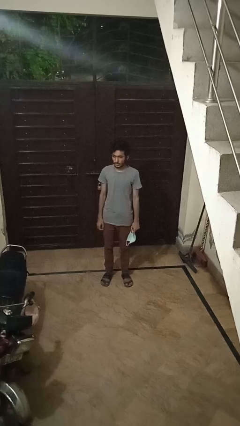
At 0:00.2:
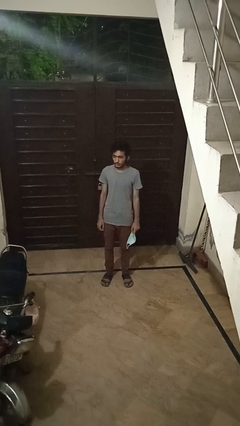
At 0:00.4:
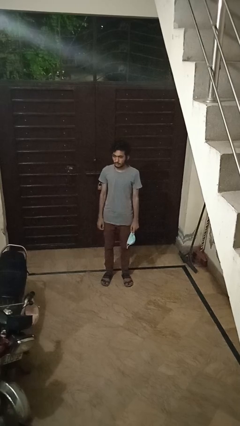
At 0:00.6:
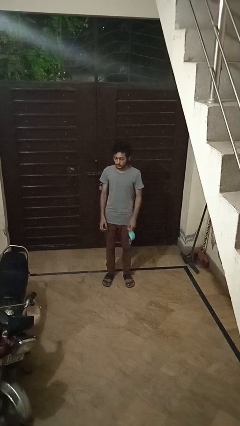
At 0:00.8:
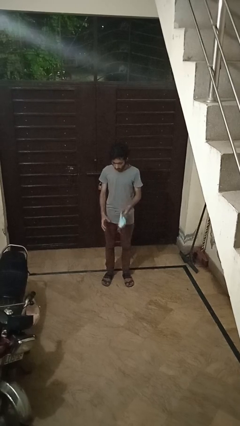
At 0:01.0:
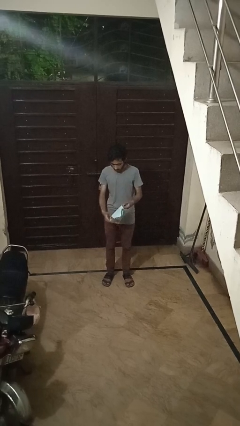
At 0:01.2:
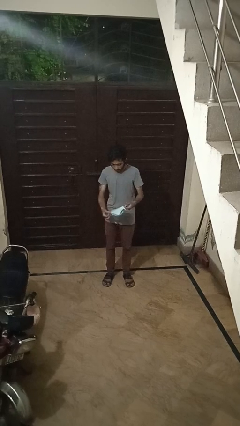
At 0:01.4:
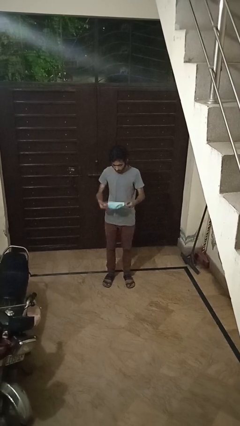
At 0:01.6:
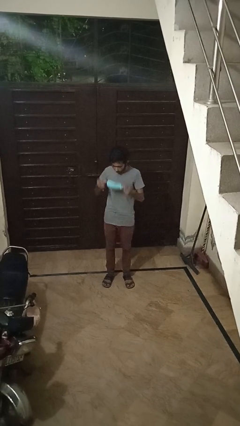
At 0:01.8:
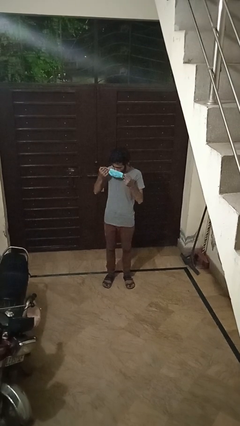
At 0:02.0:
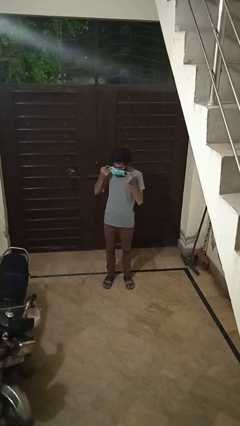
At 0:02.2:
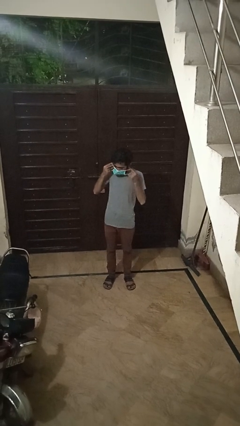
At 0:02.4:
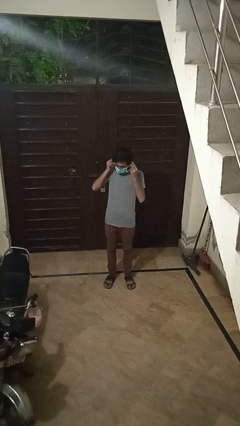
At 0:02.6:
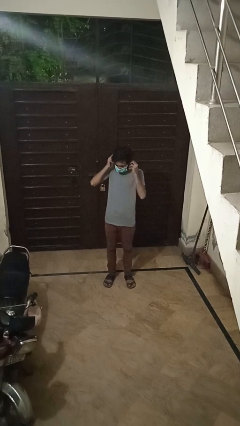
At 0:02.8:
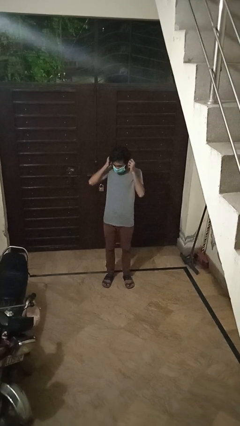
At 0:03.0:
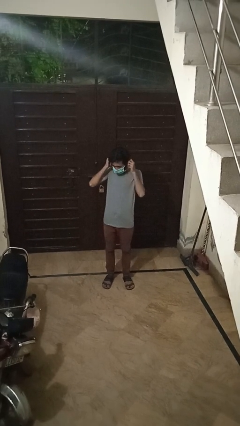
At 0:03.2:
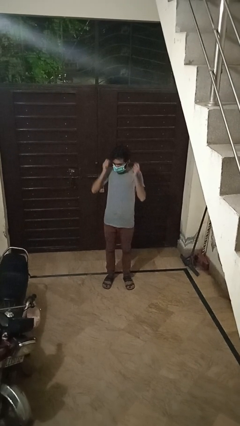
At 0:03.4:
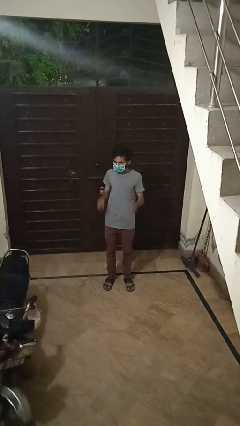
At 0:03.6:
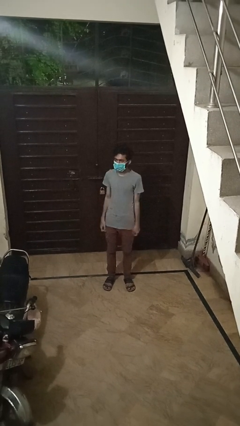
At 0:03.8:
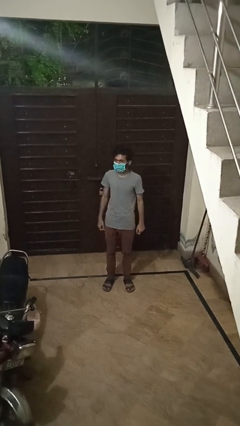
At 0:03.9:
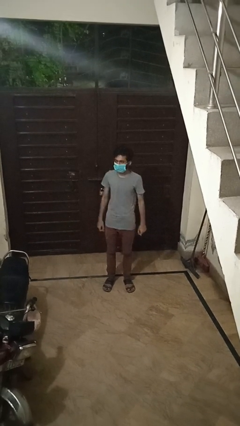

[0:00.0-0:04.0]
person puts on facemask

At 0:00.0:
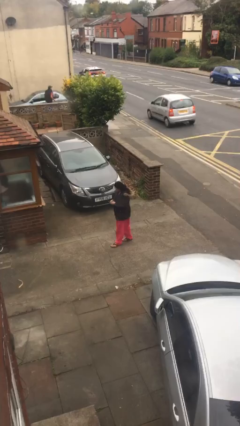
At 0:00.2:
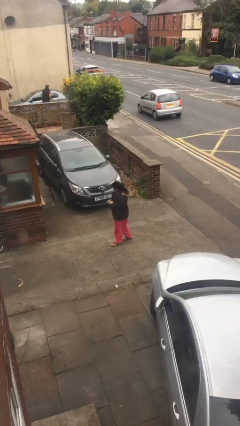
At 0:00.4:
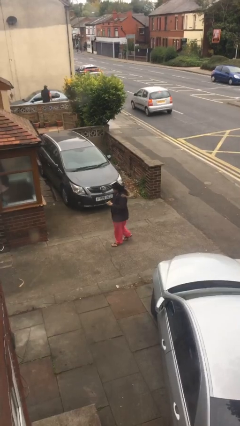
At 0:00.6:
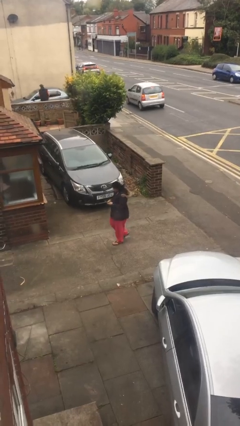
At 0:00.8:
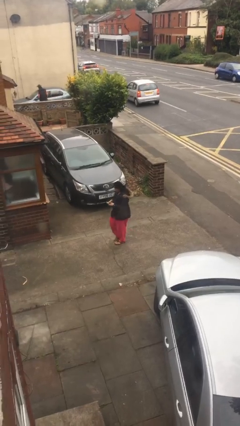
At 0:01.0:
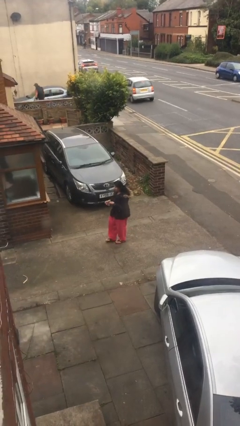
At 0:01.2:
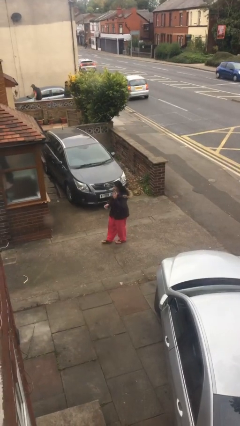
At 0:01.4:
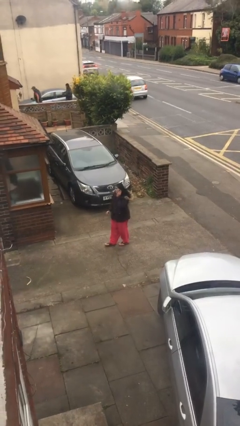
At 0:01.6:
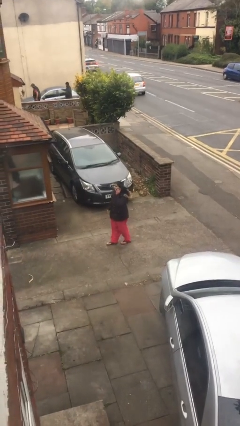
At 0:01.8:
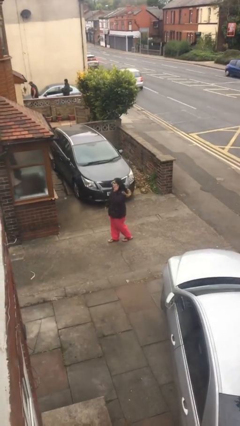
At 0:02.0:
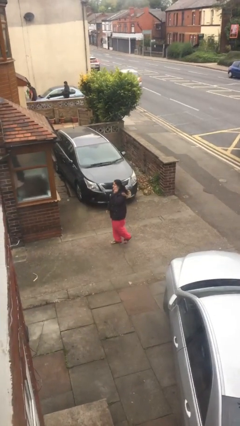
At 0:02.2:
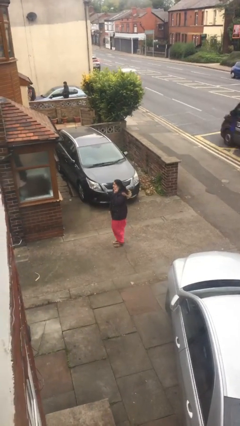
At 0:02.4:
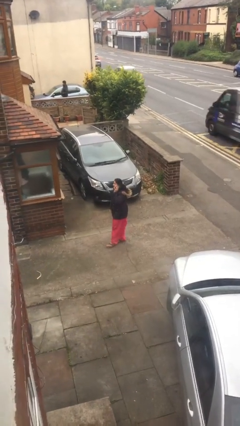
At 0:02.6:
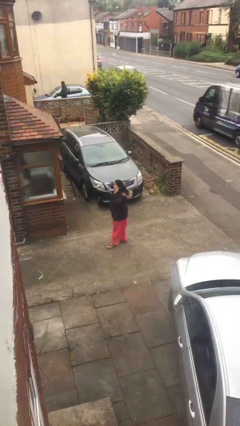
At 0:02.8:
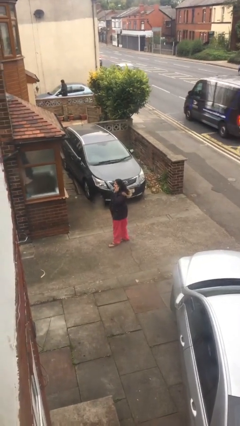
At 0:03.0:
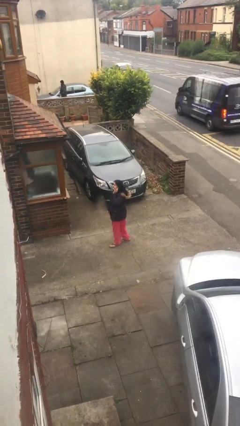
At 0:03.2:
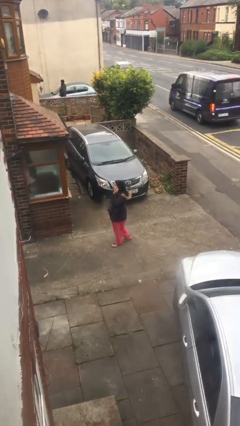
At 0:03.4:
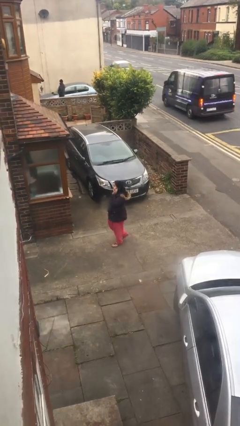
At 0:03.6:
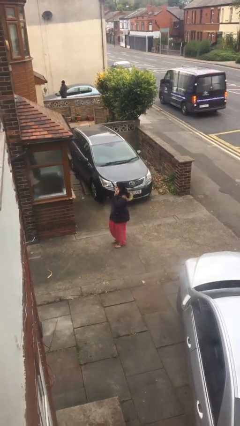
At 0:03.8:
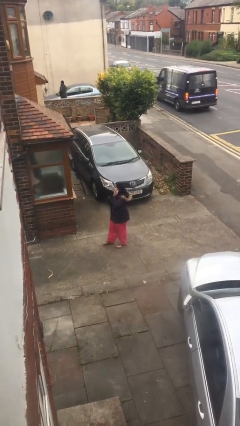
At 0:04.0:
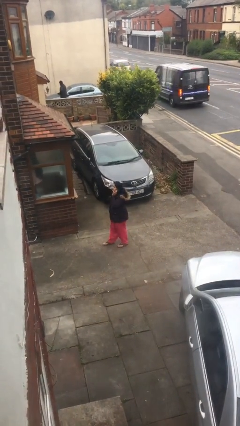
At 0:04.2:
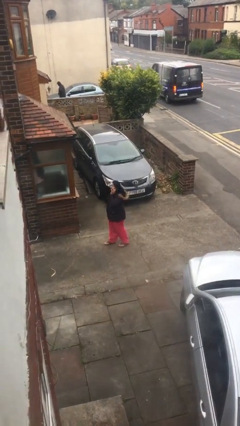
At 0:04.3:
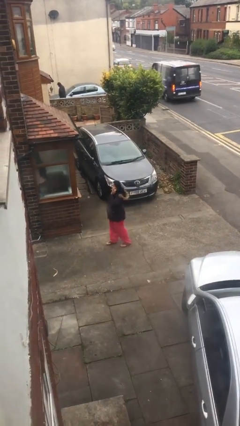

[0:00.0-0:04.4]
person talks on phone

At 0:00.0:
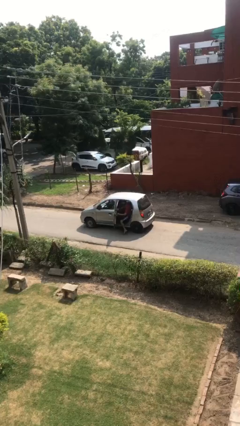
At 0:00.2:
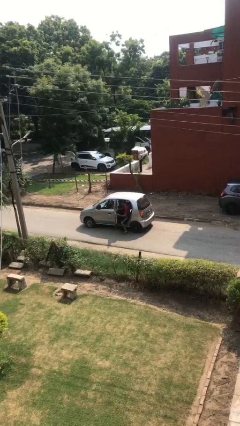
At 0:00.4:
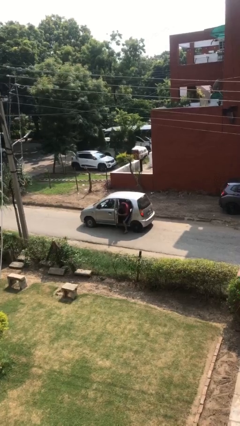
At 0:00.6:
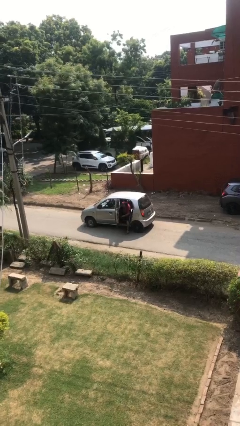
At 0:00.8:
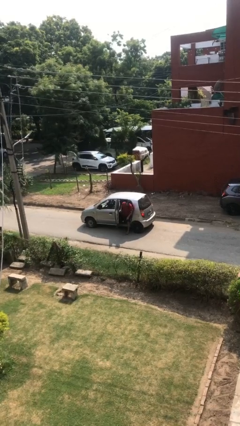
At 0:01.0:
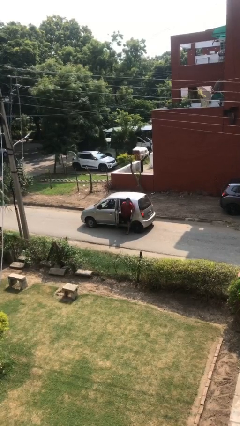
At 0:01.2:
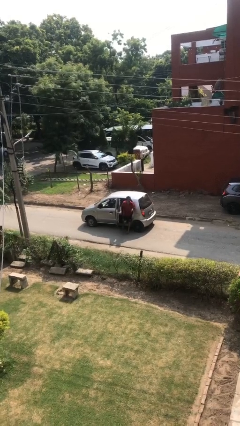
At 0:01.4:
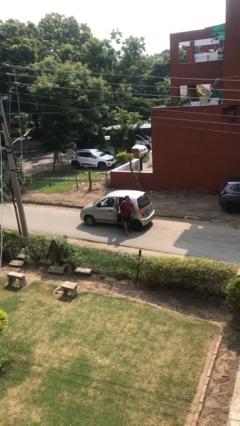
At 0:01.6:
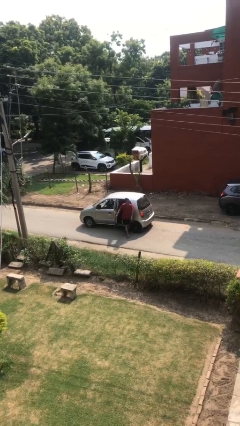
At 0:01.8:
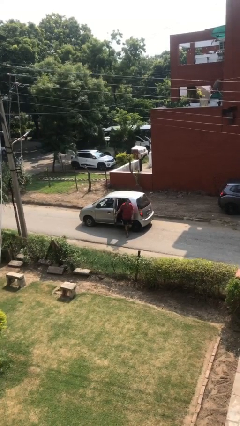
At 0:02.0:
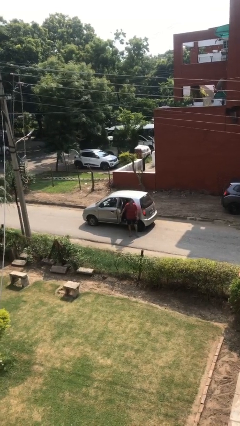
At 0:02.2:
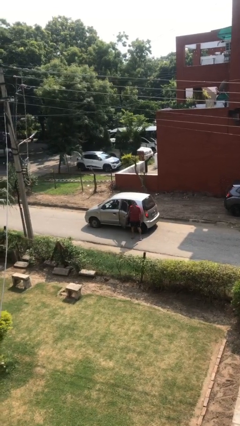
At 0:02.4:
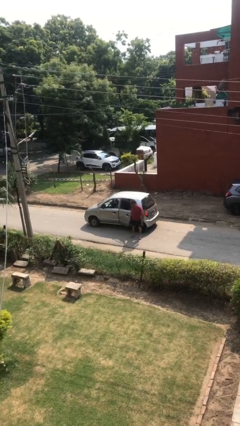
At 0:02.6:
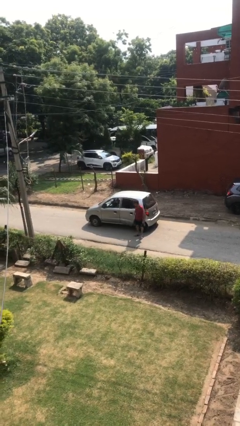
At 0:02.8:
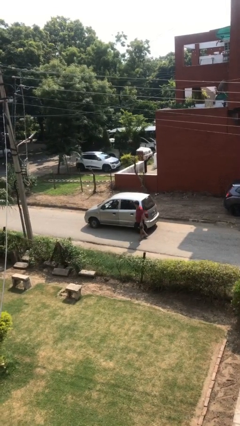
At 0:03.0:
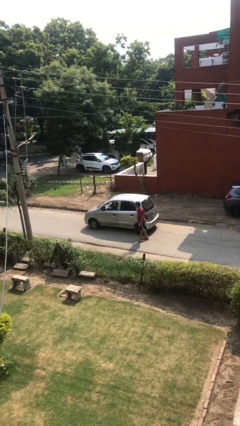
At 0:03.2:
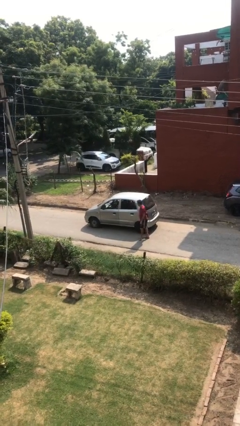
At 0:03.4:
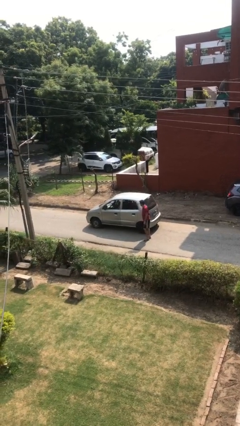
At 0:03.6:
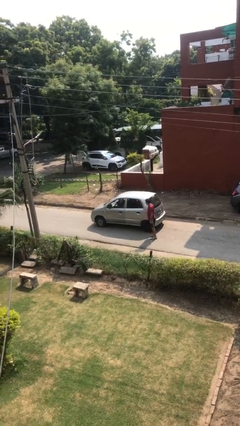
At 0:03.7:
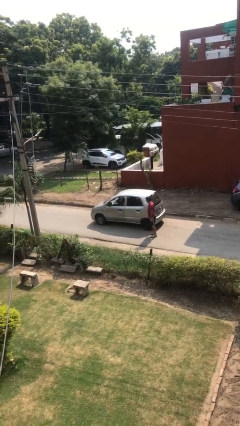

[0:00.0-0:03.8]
car drops off person

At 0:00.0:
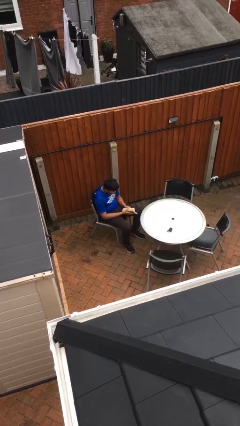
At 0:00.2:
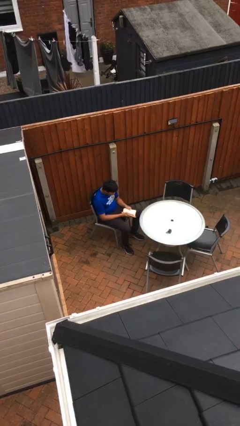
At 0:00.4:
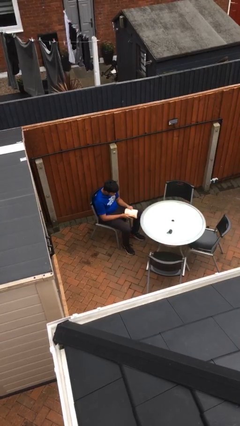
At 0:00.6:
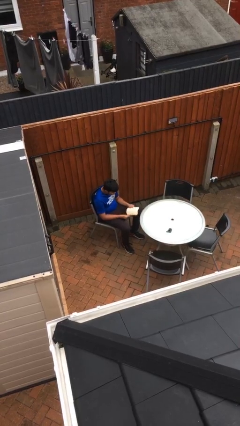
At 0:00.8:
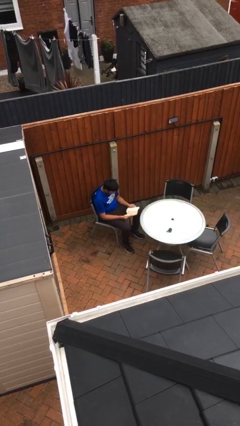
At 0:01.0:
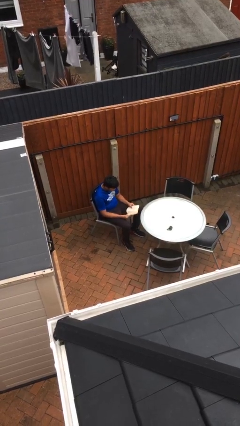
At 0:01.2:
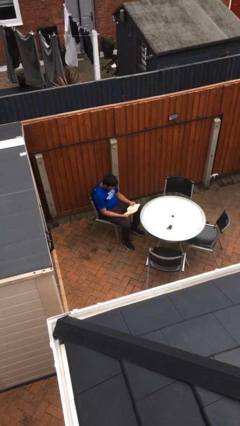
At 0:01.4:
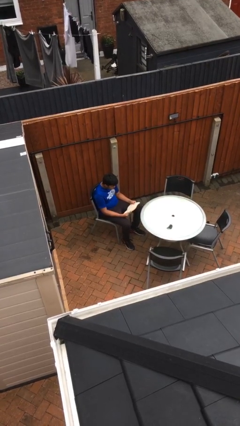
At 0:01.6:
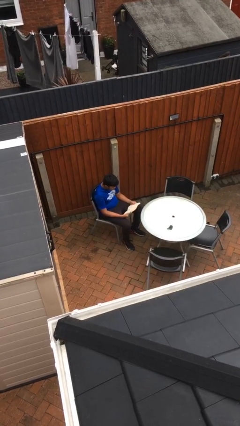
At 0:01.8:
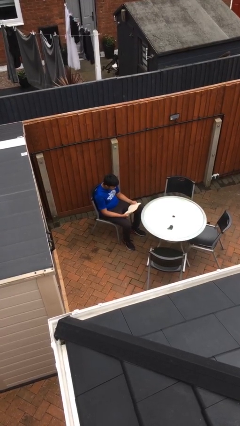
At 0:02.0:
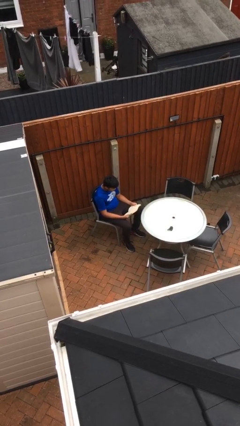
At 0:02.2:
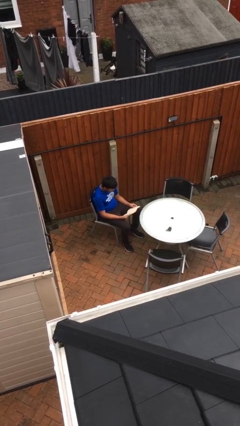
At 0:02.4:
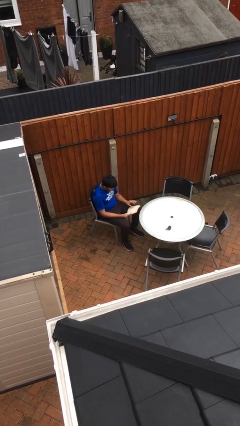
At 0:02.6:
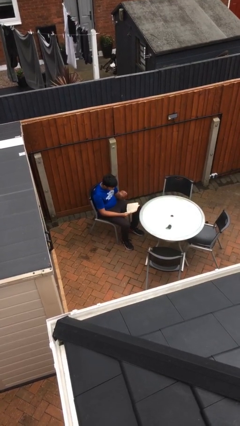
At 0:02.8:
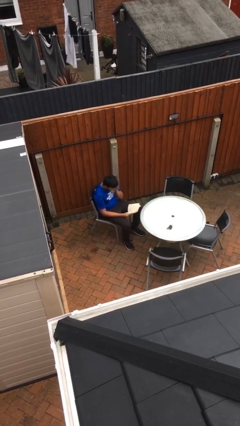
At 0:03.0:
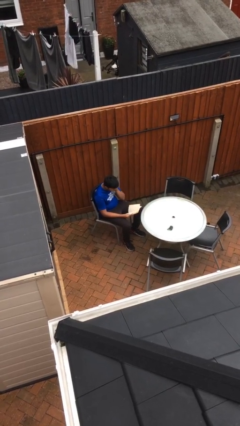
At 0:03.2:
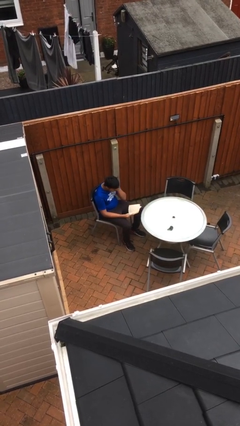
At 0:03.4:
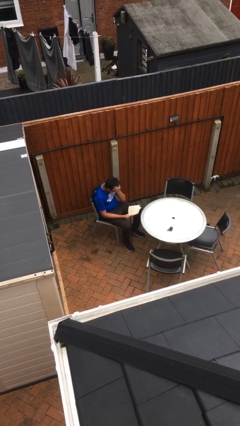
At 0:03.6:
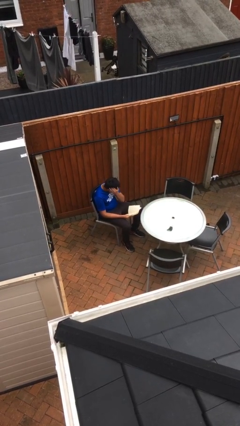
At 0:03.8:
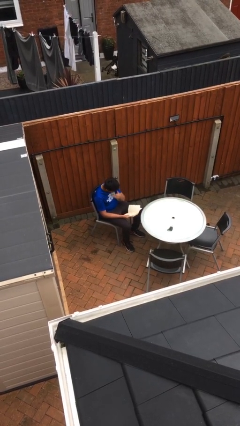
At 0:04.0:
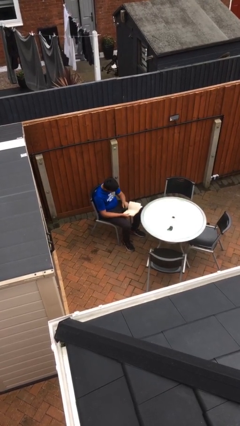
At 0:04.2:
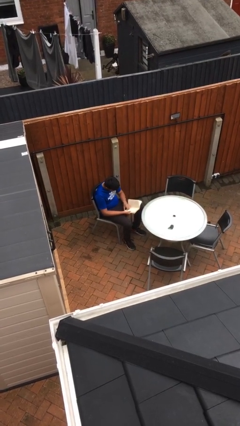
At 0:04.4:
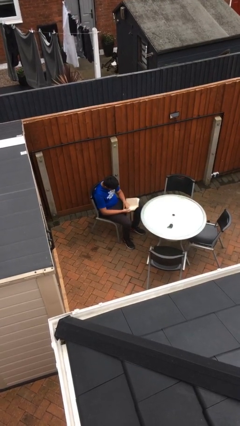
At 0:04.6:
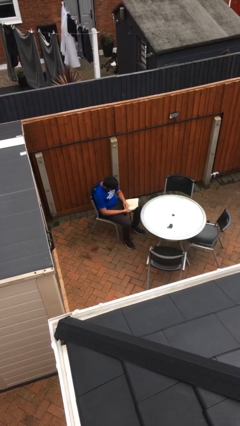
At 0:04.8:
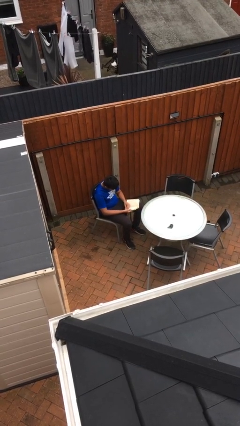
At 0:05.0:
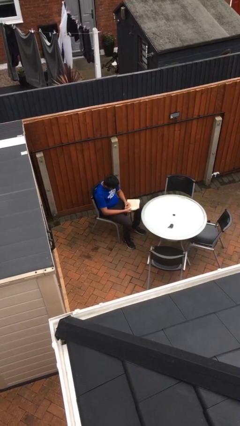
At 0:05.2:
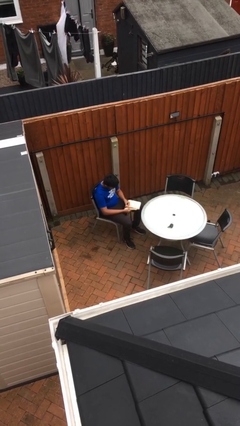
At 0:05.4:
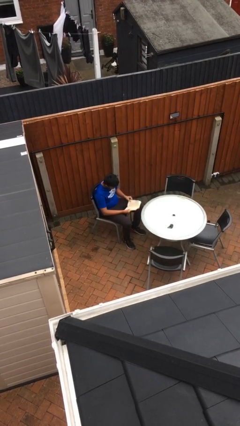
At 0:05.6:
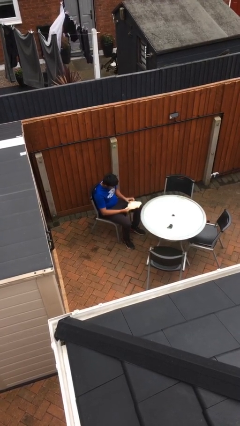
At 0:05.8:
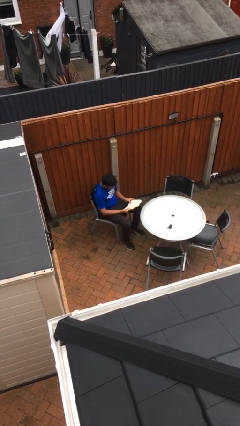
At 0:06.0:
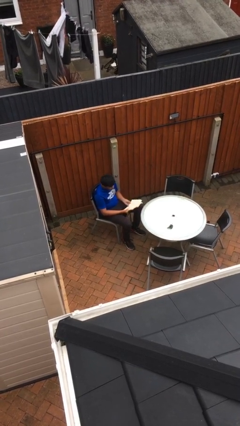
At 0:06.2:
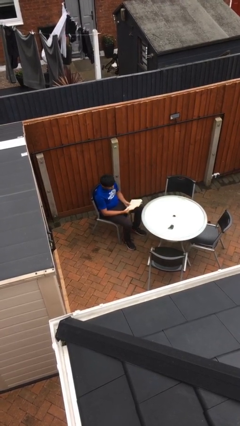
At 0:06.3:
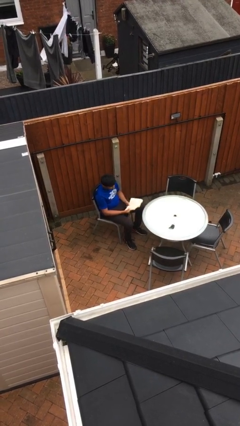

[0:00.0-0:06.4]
person reads document
